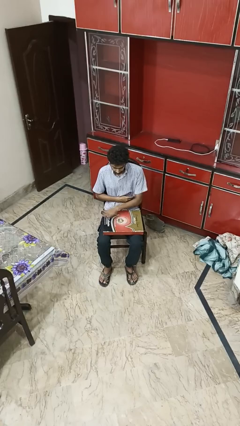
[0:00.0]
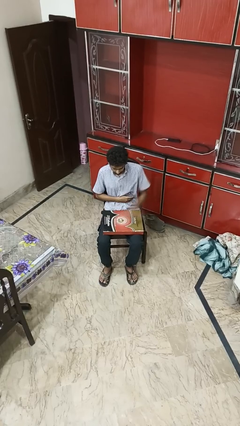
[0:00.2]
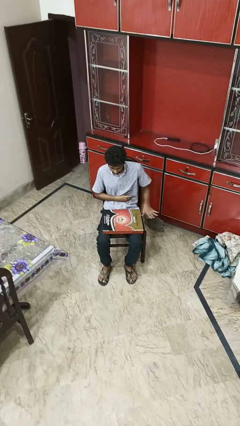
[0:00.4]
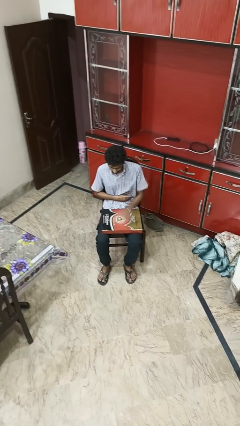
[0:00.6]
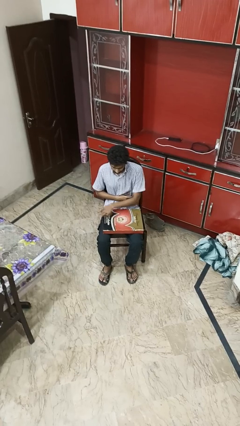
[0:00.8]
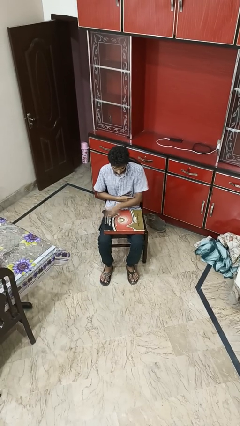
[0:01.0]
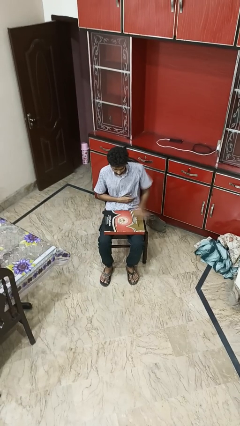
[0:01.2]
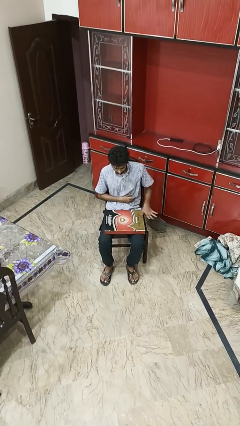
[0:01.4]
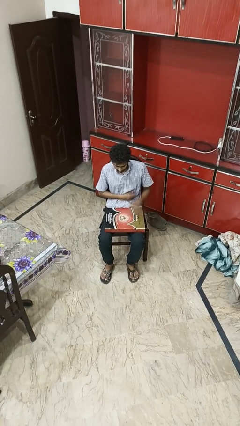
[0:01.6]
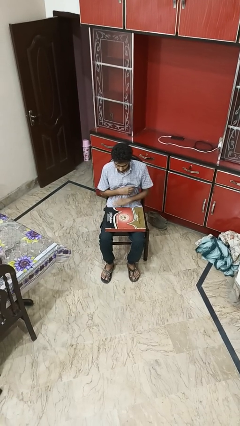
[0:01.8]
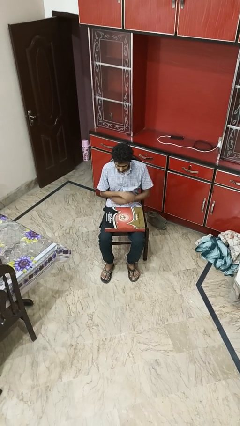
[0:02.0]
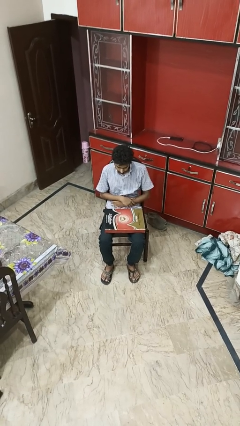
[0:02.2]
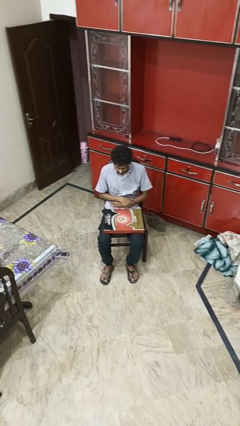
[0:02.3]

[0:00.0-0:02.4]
person waves hand over object

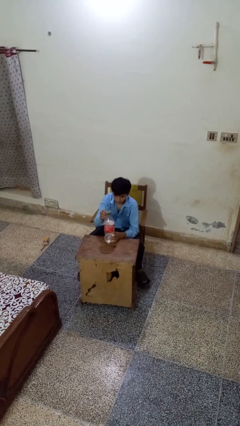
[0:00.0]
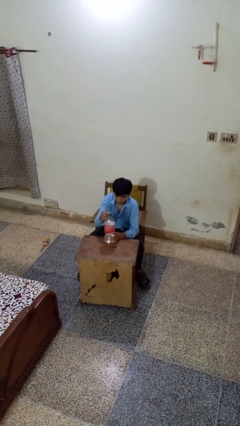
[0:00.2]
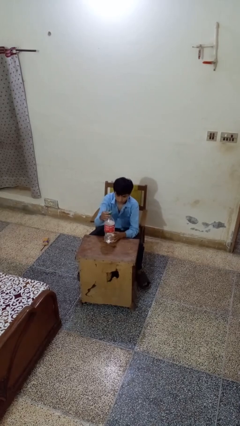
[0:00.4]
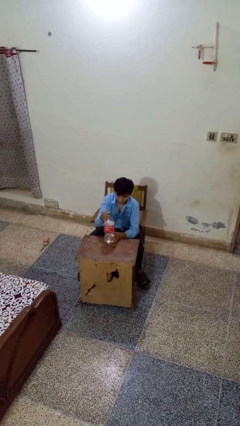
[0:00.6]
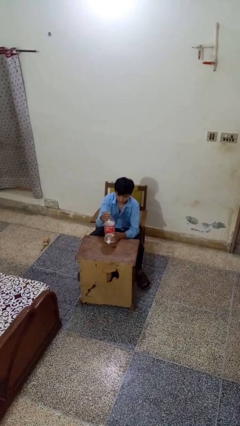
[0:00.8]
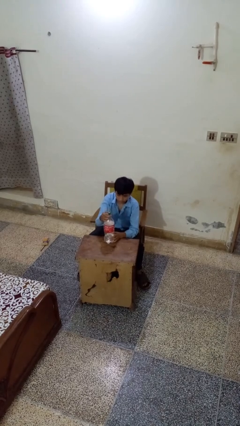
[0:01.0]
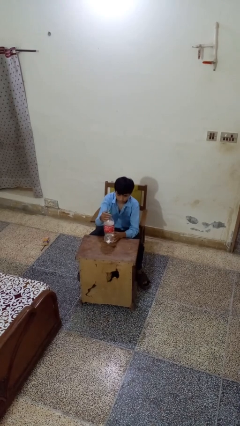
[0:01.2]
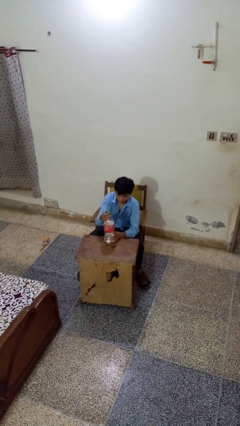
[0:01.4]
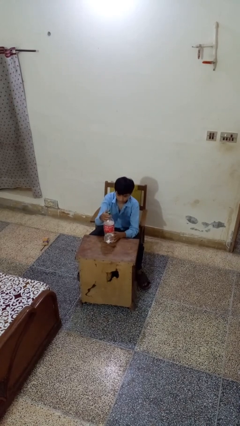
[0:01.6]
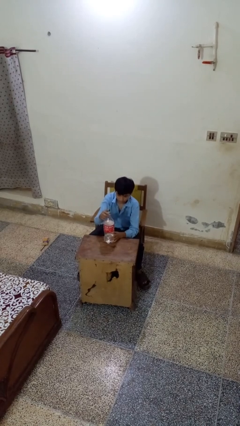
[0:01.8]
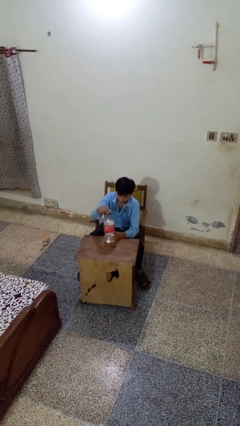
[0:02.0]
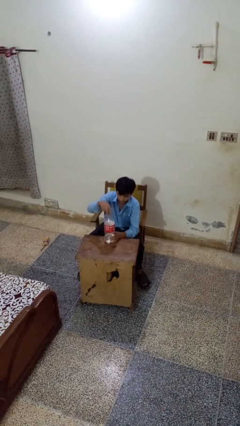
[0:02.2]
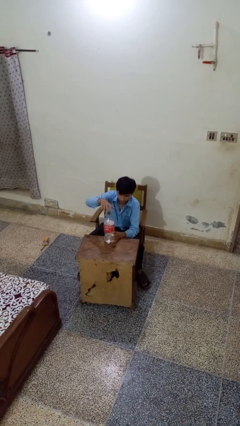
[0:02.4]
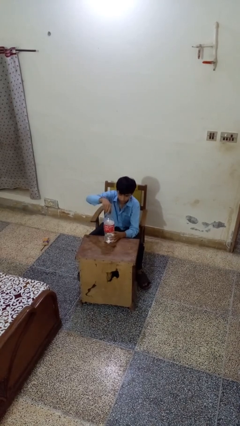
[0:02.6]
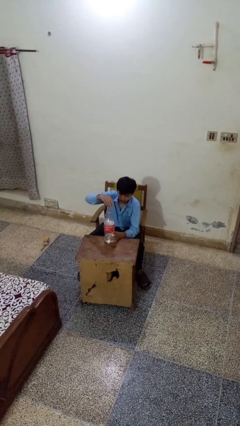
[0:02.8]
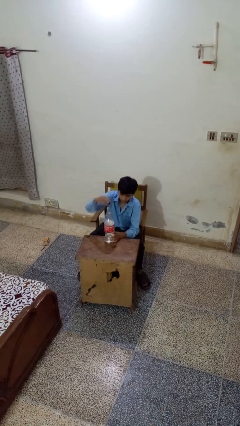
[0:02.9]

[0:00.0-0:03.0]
person unscrews lid from bottle

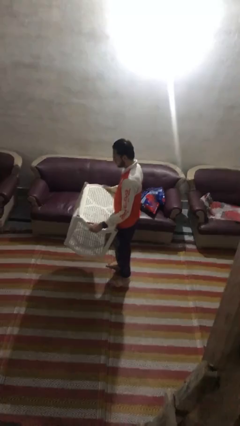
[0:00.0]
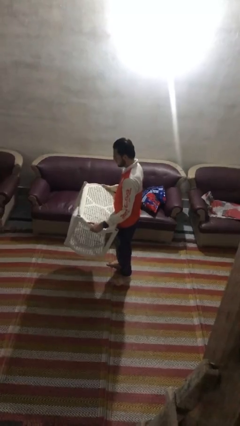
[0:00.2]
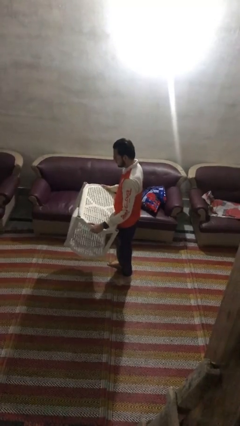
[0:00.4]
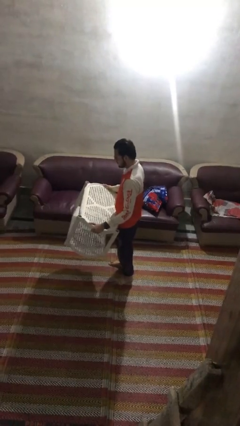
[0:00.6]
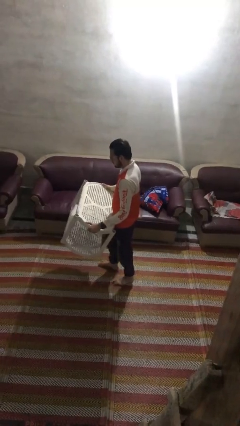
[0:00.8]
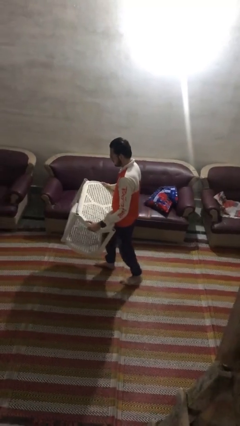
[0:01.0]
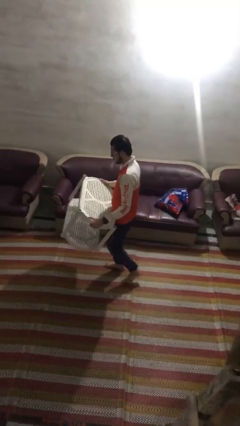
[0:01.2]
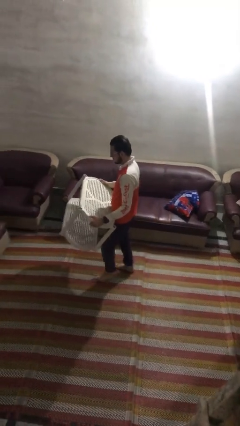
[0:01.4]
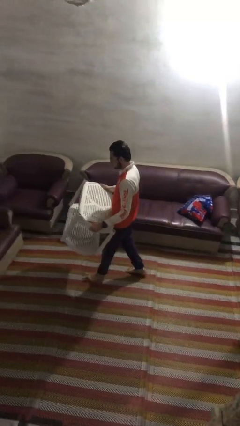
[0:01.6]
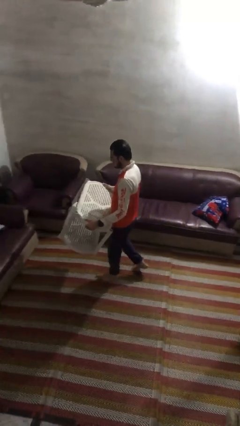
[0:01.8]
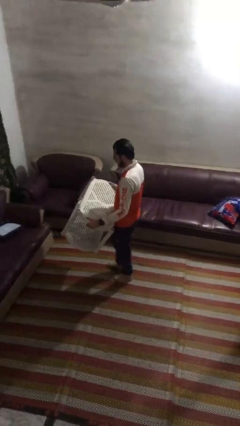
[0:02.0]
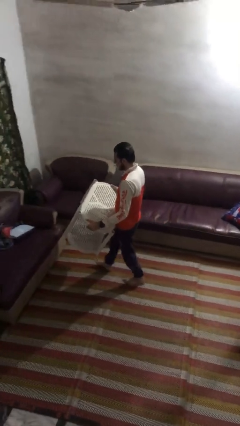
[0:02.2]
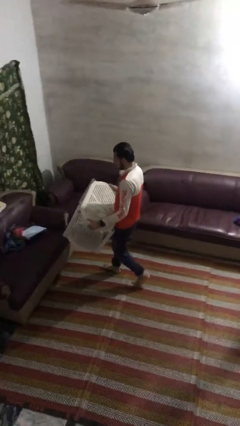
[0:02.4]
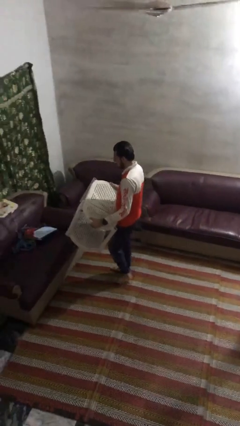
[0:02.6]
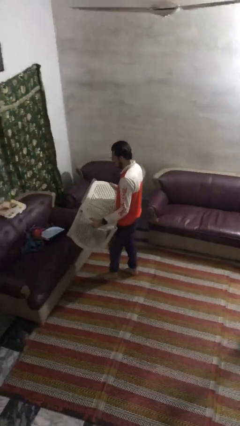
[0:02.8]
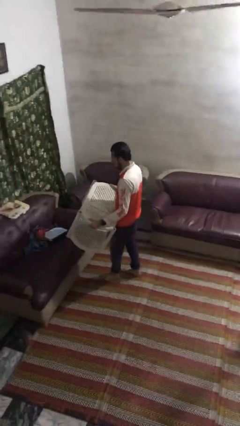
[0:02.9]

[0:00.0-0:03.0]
person carries furniture

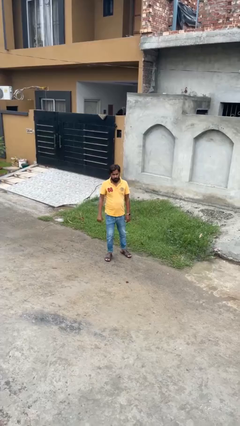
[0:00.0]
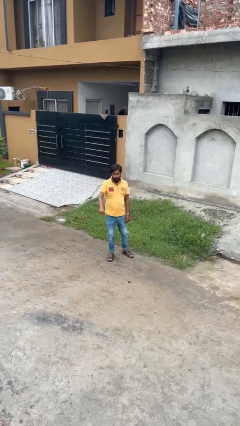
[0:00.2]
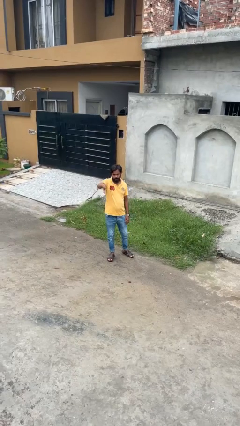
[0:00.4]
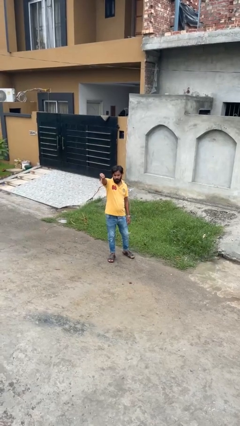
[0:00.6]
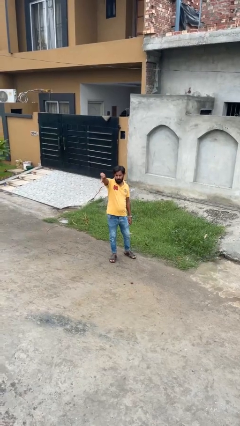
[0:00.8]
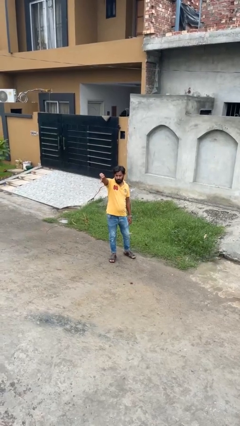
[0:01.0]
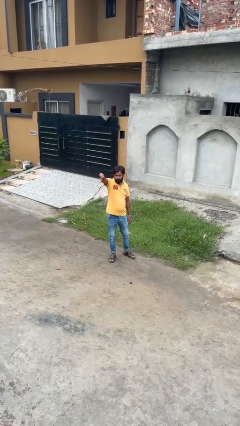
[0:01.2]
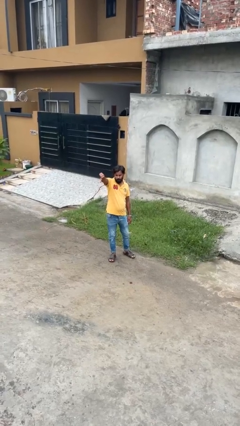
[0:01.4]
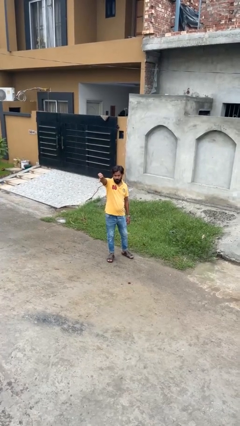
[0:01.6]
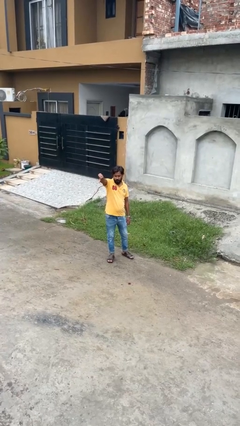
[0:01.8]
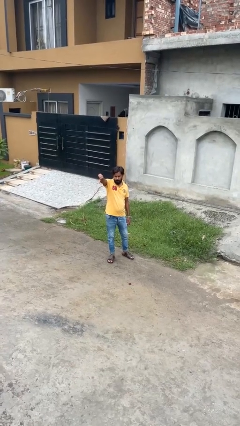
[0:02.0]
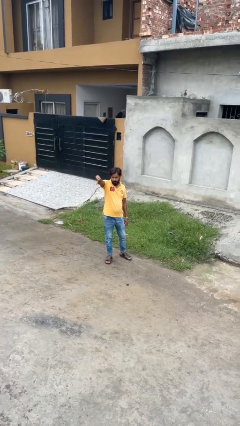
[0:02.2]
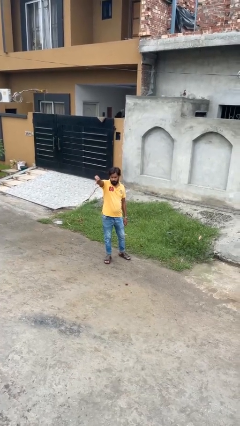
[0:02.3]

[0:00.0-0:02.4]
person gestures thumbs down

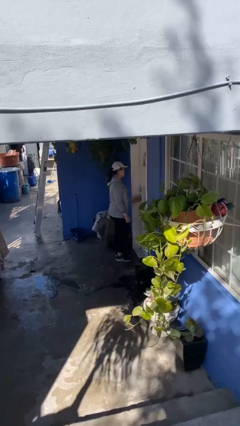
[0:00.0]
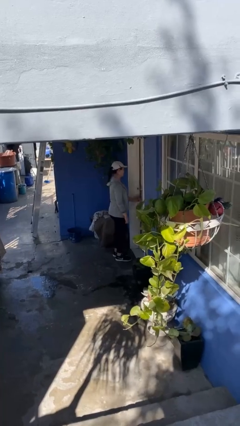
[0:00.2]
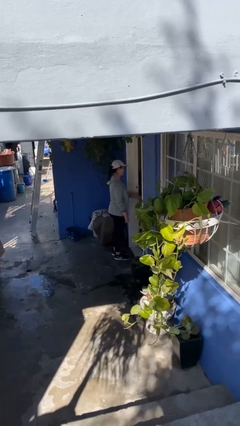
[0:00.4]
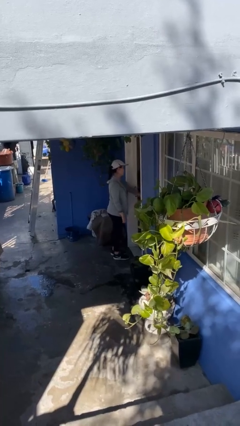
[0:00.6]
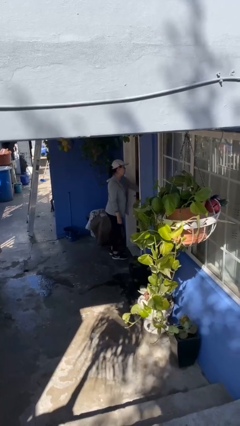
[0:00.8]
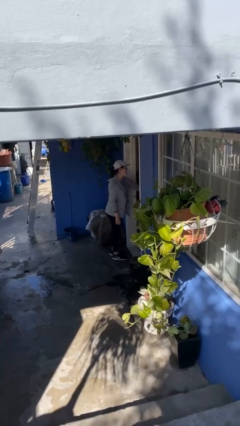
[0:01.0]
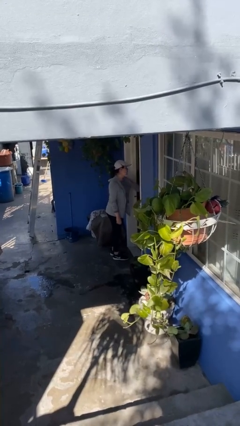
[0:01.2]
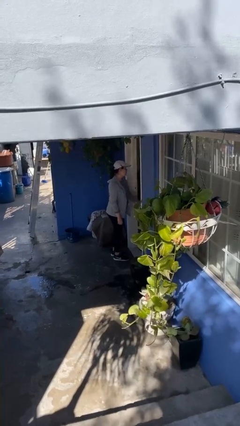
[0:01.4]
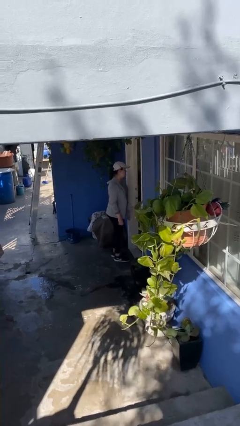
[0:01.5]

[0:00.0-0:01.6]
person opens facility door

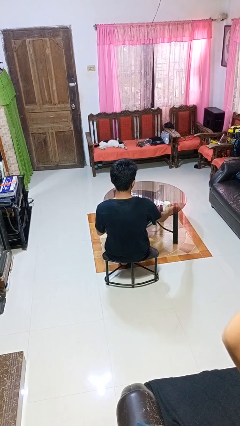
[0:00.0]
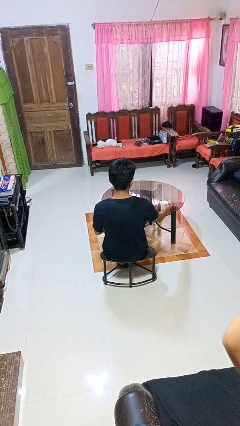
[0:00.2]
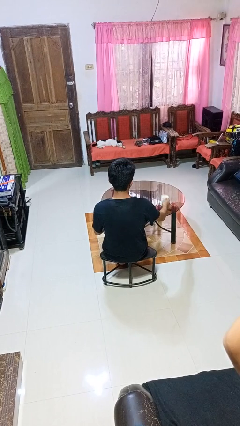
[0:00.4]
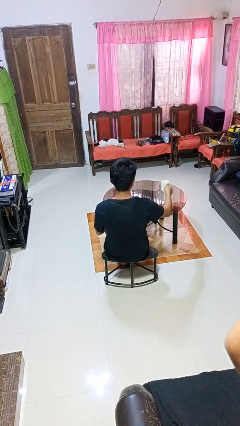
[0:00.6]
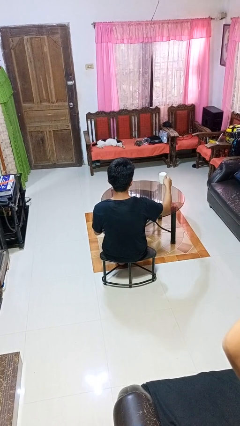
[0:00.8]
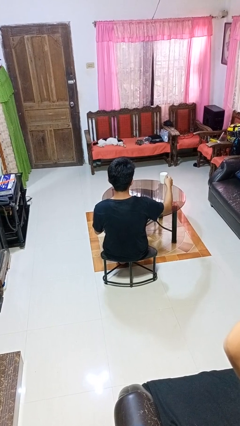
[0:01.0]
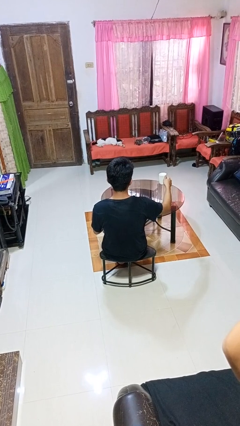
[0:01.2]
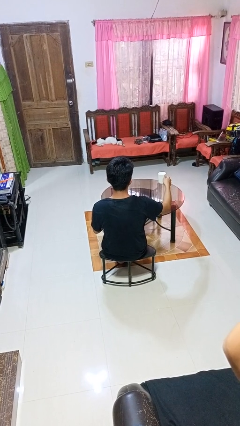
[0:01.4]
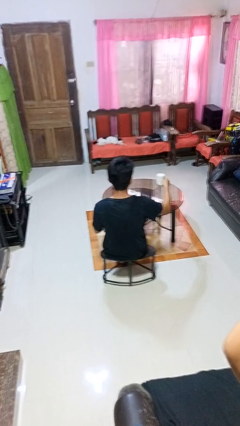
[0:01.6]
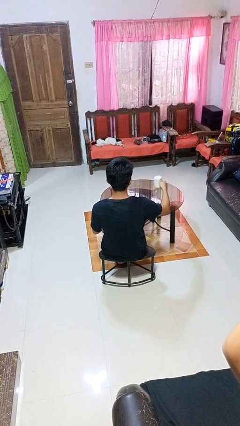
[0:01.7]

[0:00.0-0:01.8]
person picks up object from table

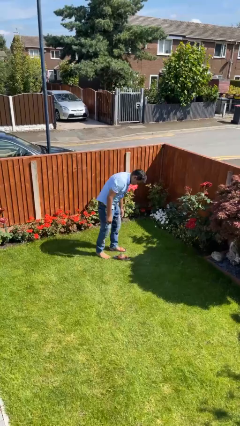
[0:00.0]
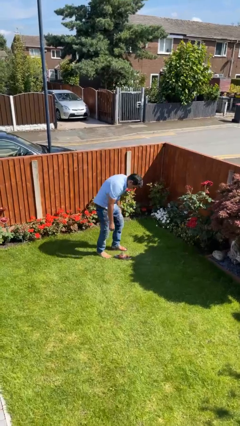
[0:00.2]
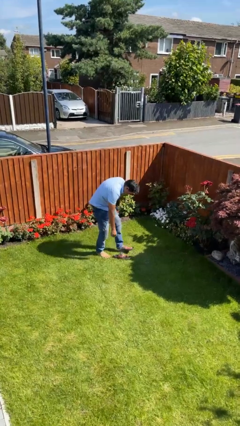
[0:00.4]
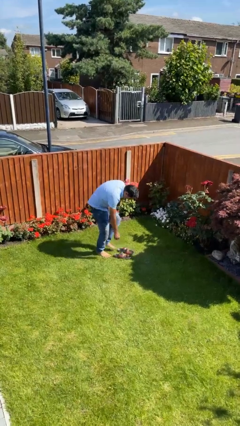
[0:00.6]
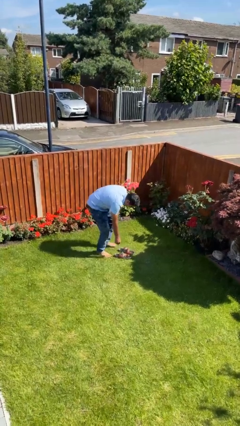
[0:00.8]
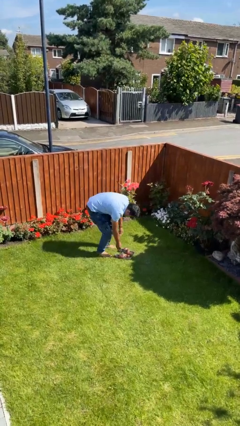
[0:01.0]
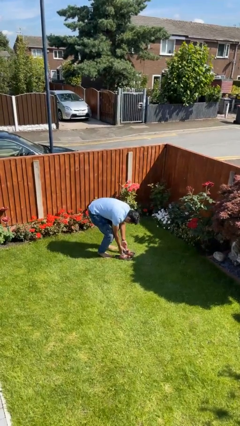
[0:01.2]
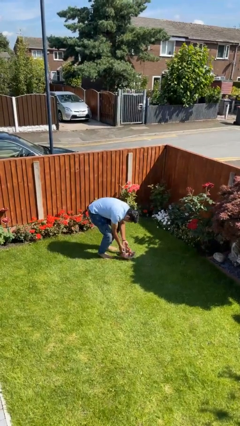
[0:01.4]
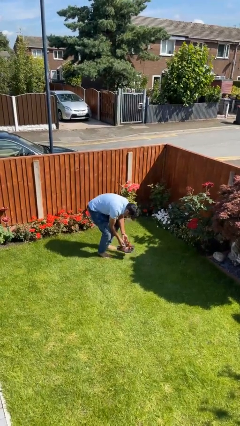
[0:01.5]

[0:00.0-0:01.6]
person takes off shoes

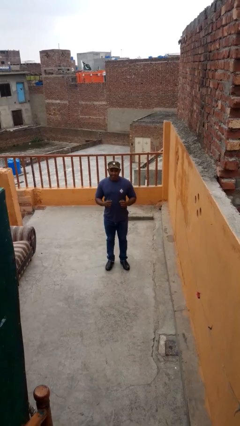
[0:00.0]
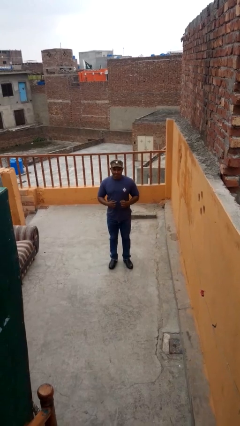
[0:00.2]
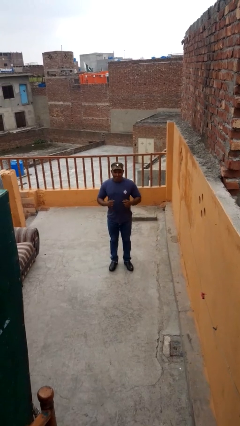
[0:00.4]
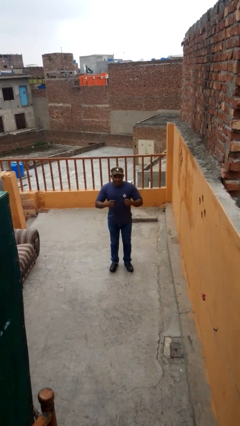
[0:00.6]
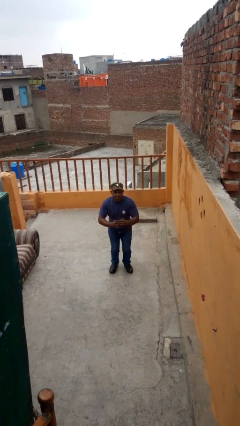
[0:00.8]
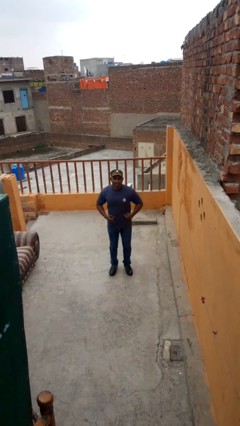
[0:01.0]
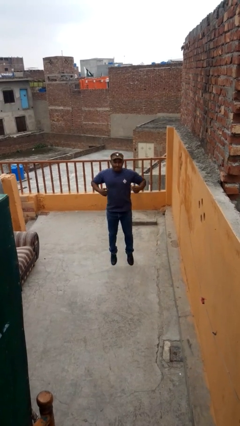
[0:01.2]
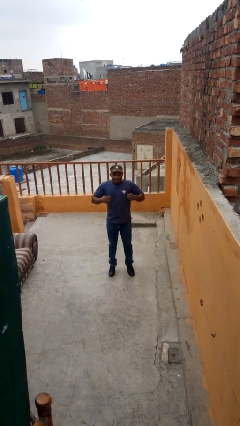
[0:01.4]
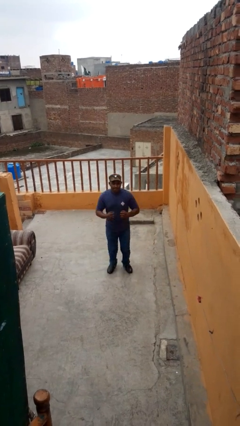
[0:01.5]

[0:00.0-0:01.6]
person jumps
